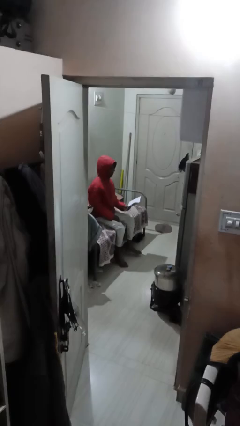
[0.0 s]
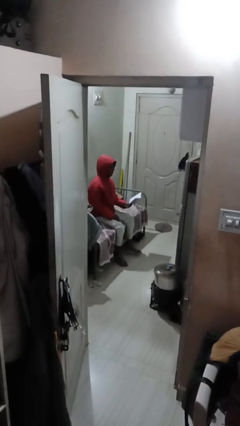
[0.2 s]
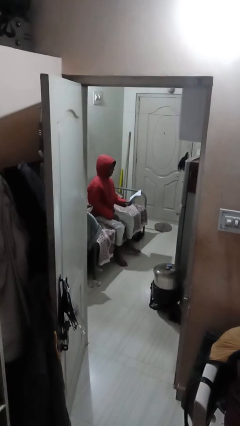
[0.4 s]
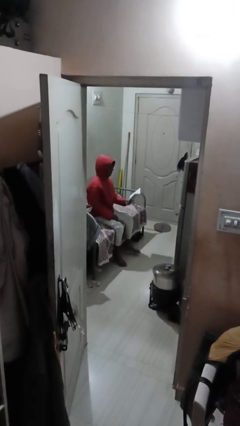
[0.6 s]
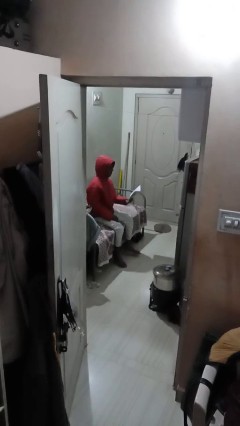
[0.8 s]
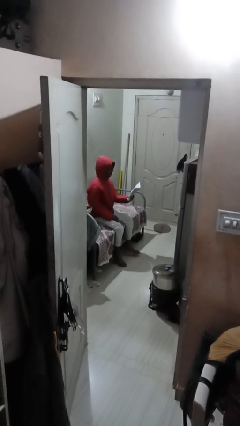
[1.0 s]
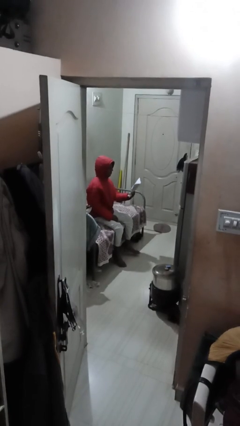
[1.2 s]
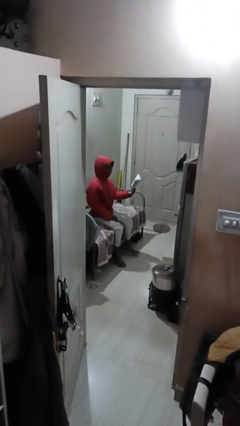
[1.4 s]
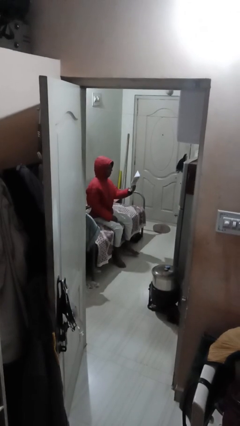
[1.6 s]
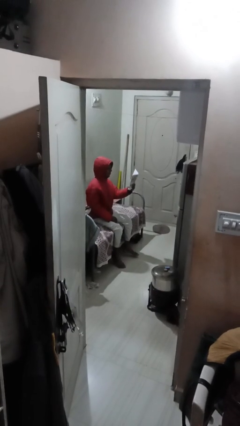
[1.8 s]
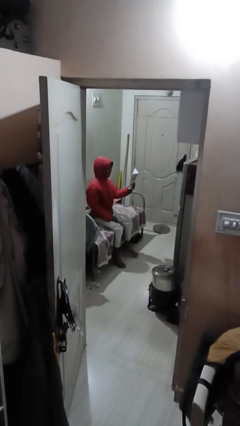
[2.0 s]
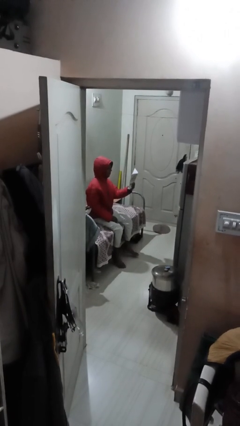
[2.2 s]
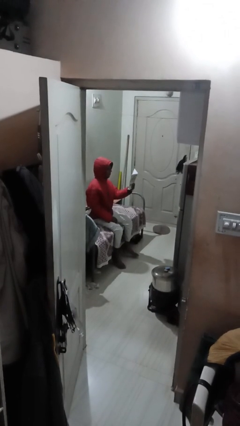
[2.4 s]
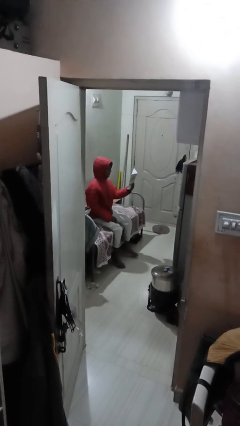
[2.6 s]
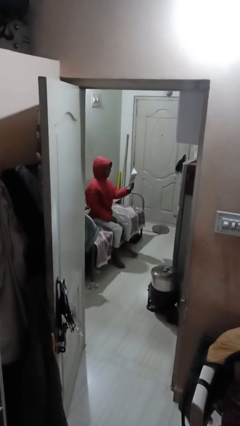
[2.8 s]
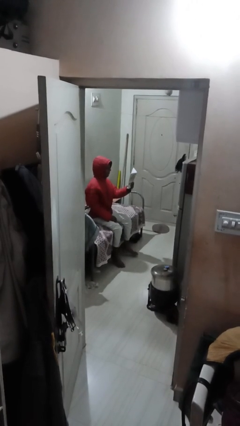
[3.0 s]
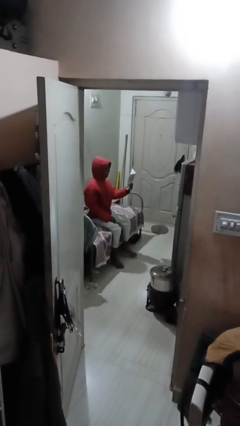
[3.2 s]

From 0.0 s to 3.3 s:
person reads document

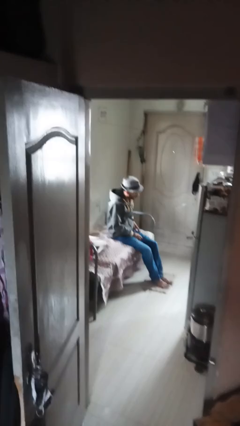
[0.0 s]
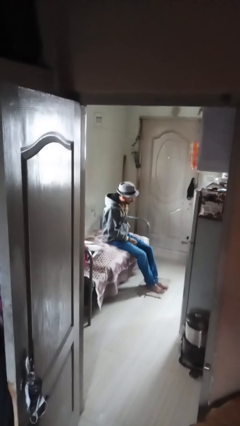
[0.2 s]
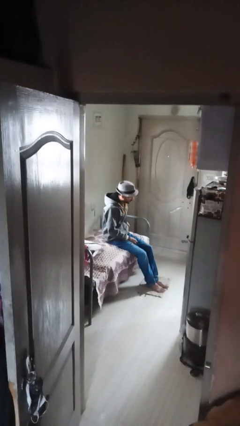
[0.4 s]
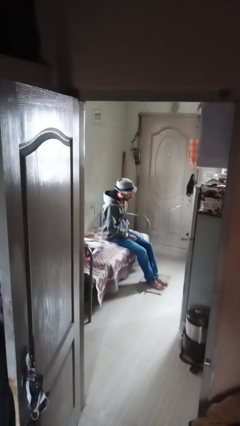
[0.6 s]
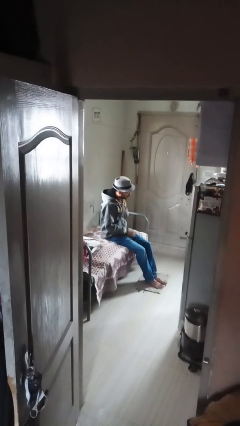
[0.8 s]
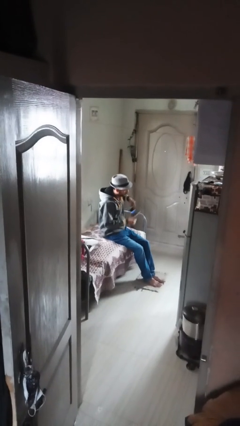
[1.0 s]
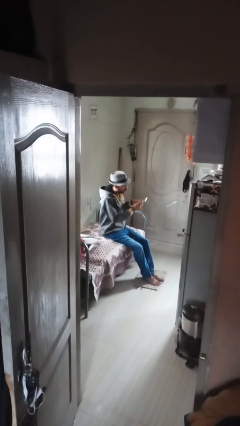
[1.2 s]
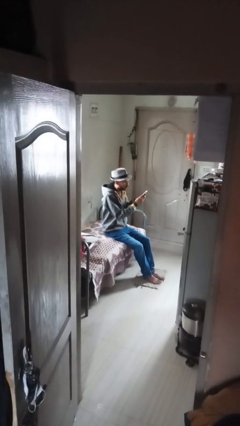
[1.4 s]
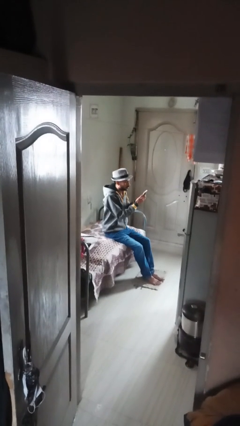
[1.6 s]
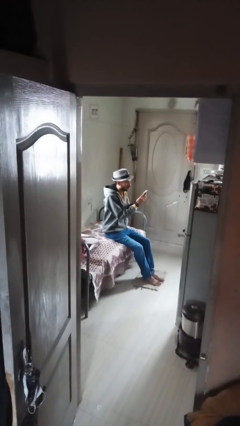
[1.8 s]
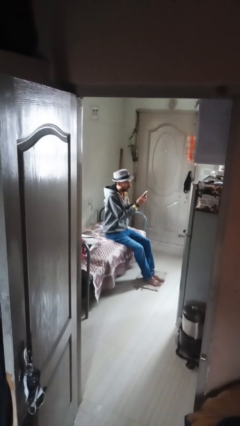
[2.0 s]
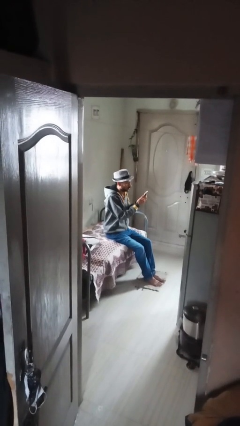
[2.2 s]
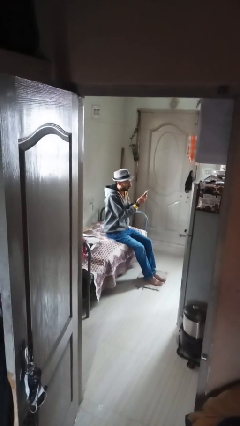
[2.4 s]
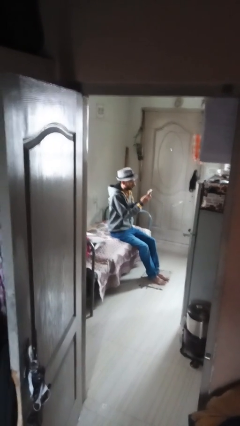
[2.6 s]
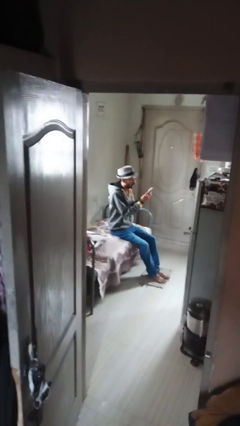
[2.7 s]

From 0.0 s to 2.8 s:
person takes phone from pocket

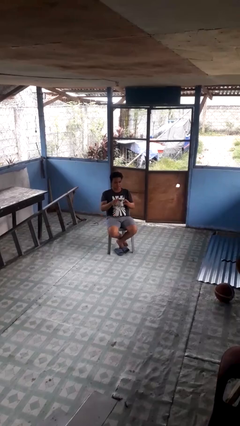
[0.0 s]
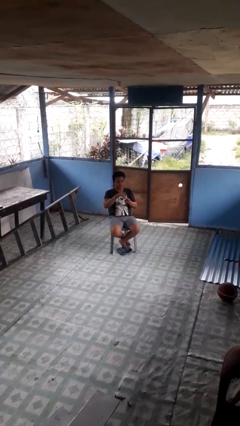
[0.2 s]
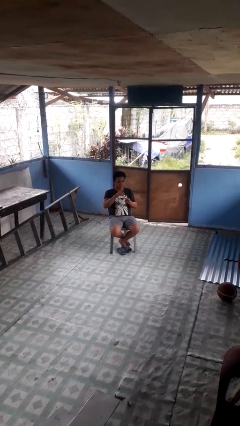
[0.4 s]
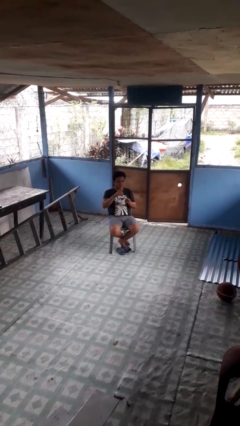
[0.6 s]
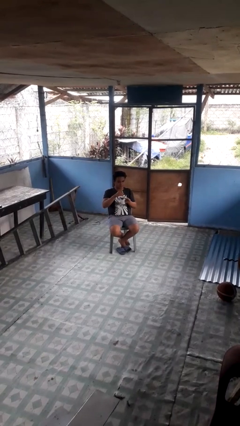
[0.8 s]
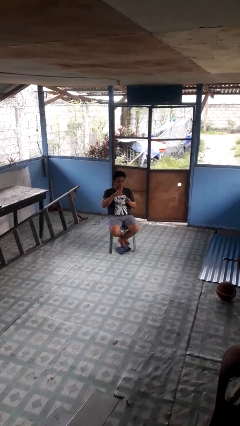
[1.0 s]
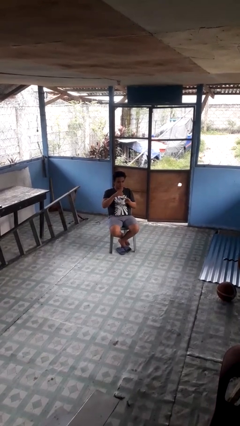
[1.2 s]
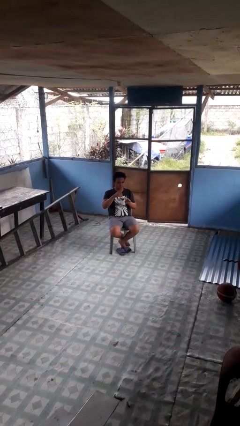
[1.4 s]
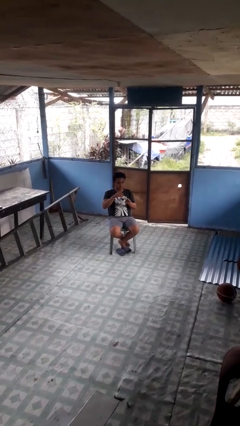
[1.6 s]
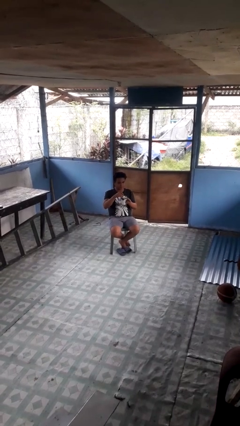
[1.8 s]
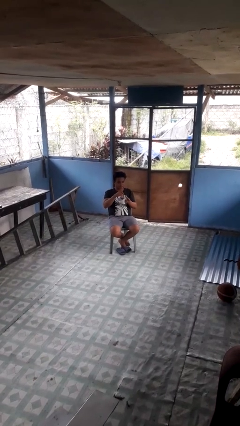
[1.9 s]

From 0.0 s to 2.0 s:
person stirs mug

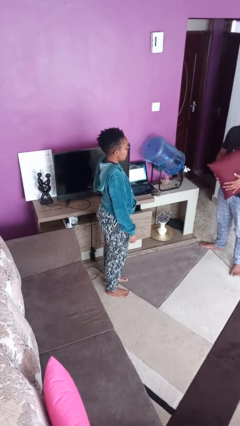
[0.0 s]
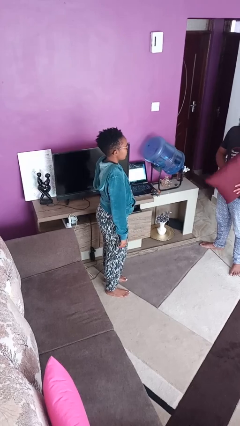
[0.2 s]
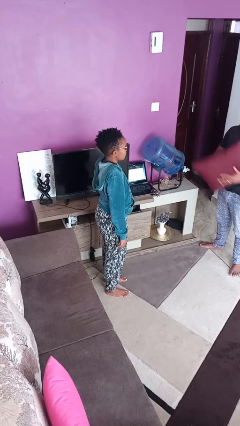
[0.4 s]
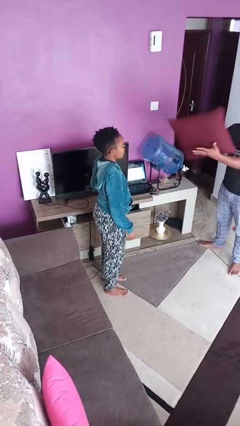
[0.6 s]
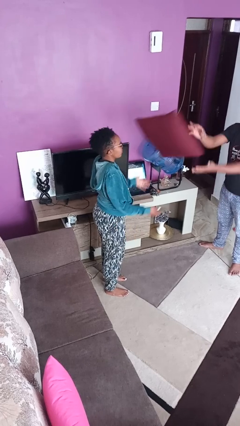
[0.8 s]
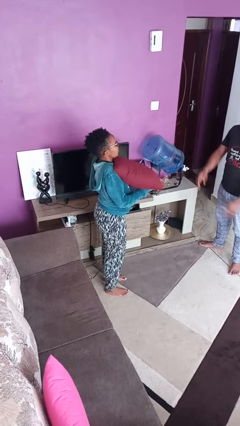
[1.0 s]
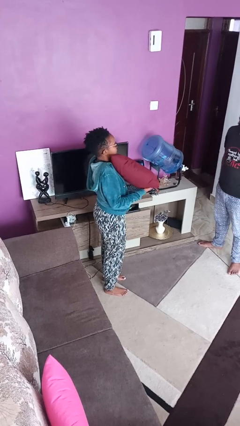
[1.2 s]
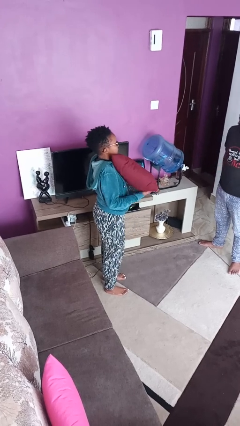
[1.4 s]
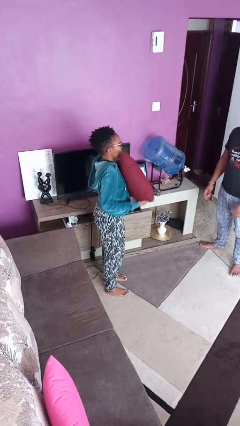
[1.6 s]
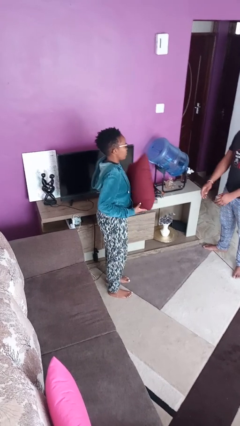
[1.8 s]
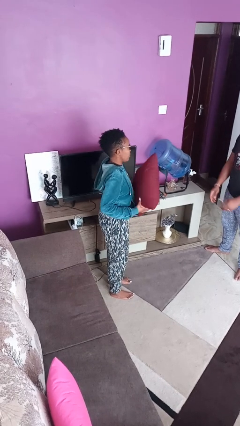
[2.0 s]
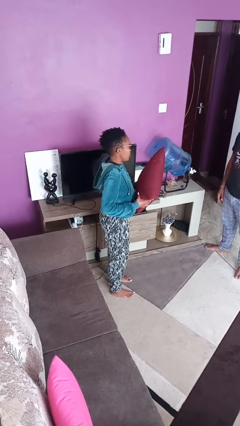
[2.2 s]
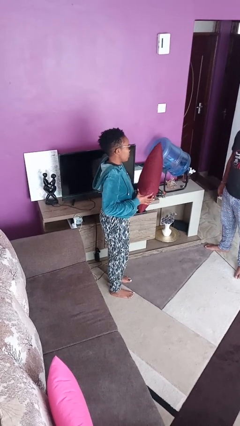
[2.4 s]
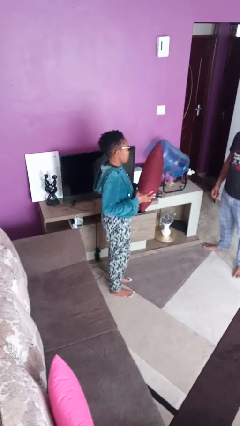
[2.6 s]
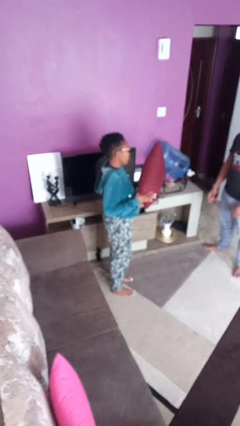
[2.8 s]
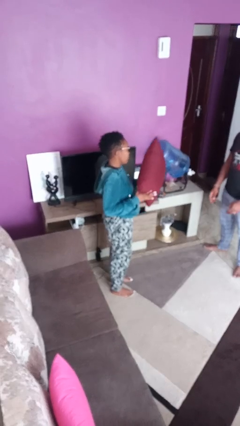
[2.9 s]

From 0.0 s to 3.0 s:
person catches object from person

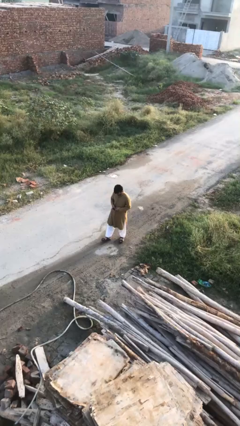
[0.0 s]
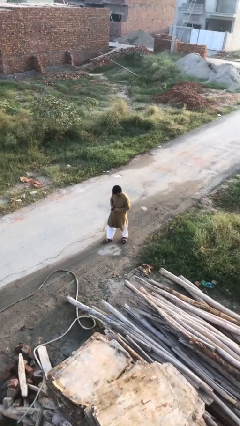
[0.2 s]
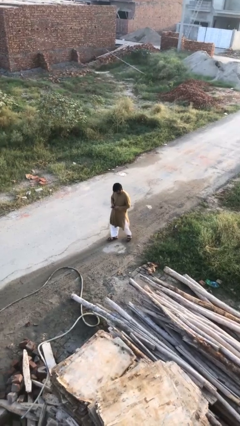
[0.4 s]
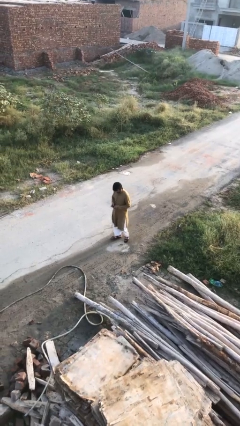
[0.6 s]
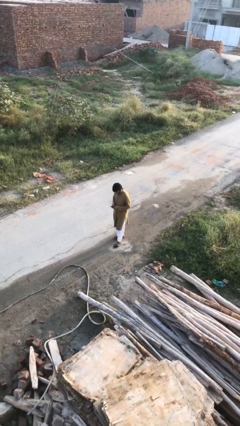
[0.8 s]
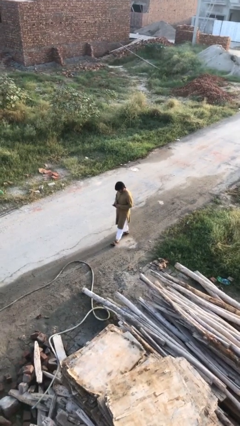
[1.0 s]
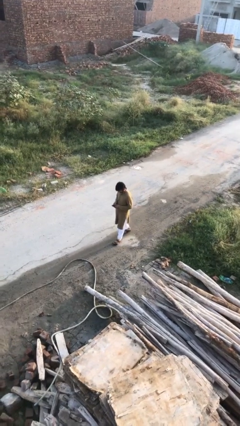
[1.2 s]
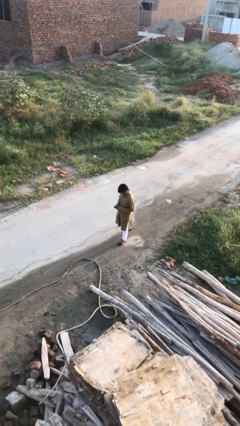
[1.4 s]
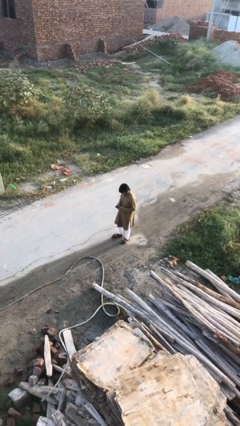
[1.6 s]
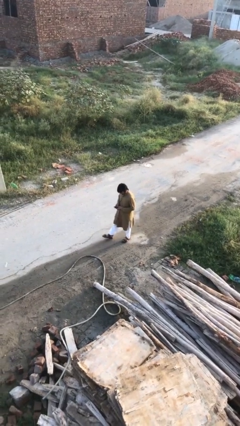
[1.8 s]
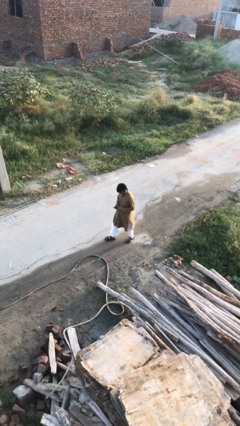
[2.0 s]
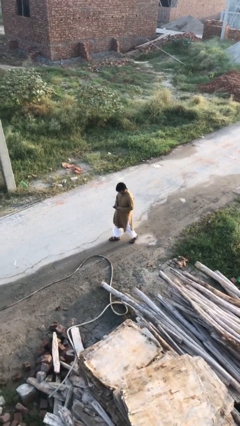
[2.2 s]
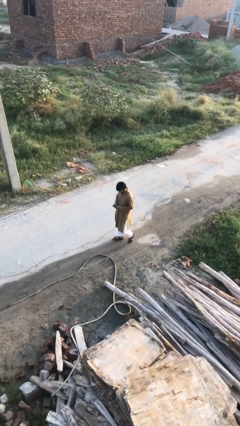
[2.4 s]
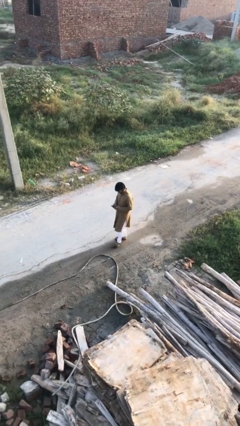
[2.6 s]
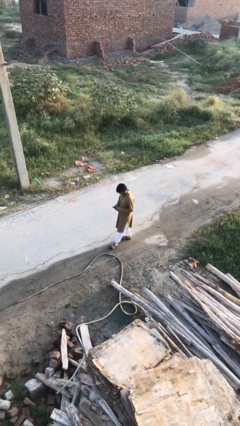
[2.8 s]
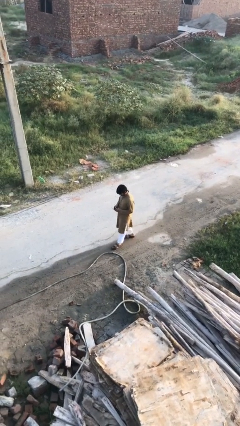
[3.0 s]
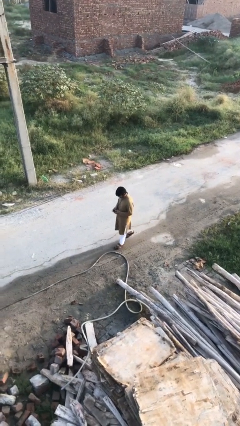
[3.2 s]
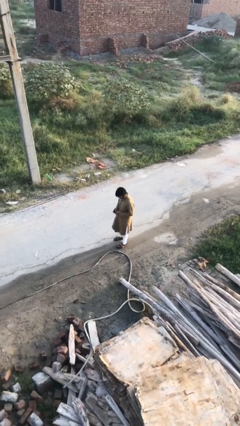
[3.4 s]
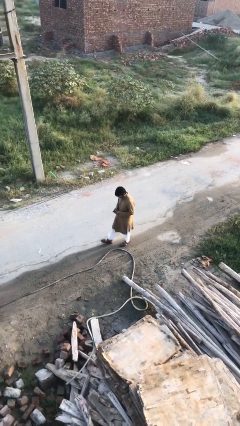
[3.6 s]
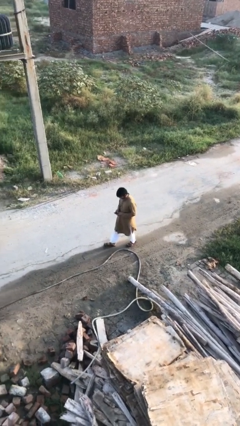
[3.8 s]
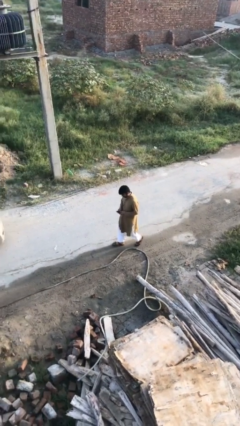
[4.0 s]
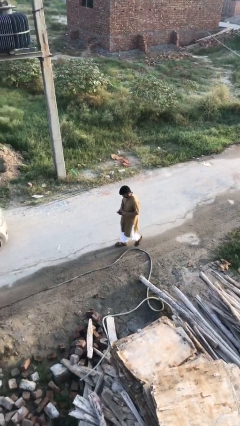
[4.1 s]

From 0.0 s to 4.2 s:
person texts on phone

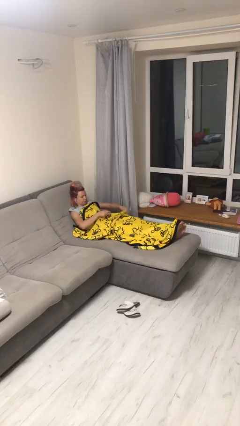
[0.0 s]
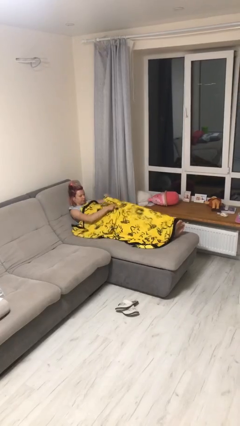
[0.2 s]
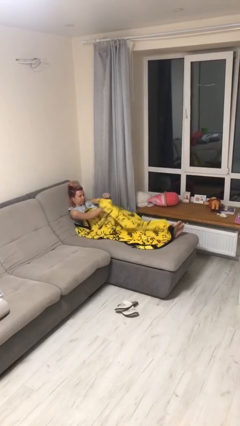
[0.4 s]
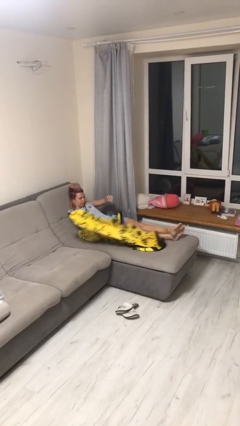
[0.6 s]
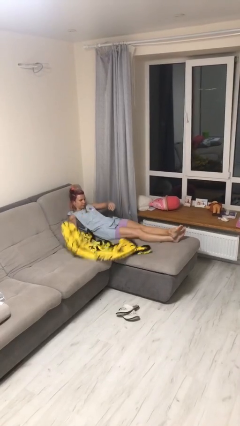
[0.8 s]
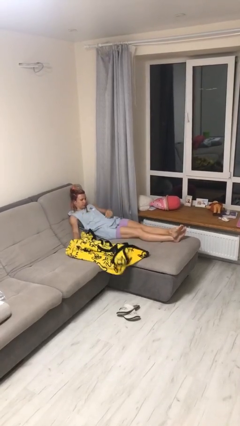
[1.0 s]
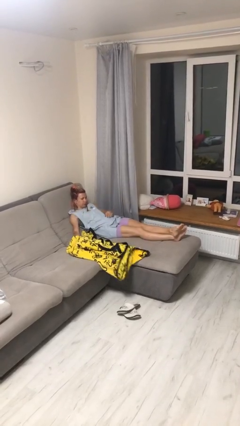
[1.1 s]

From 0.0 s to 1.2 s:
person uncovers with blanket

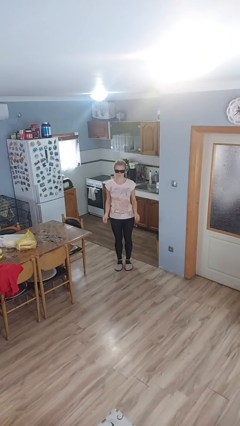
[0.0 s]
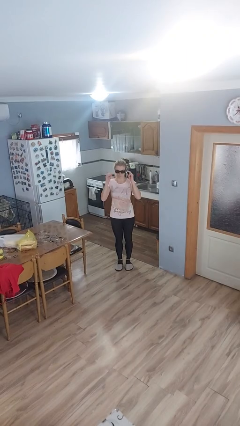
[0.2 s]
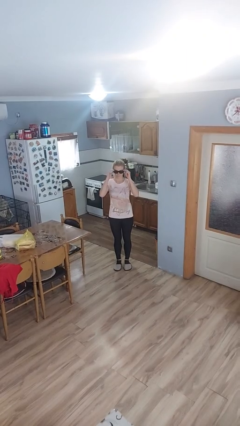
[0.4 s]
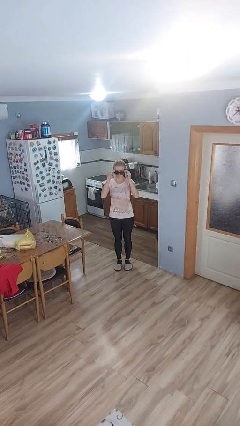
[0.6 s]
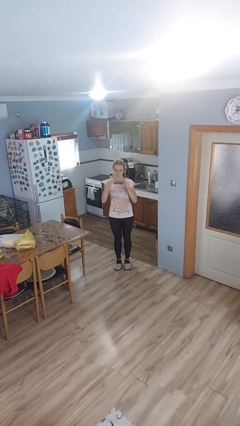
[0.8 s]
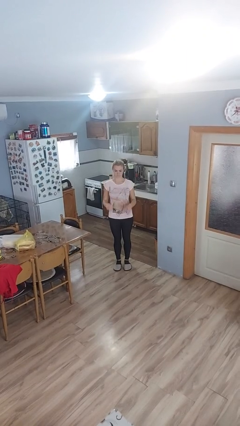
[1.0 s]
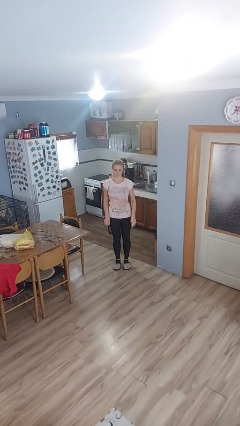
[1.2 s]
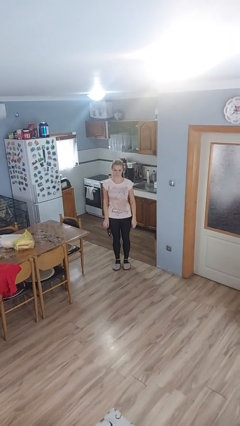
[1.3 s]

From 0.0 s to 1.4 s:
person takes off sunglasses
